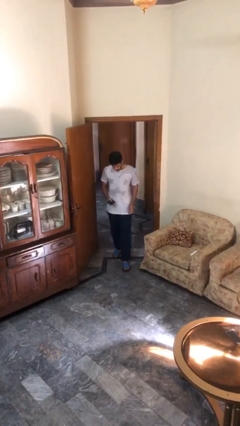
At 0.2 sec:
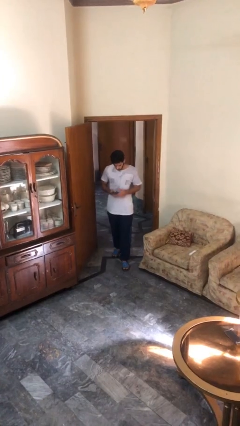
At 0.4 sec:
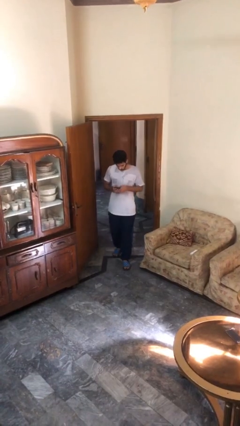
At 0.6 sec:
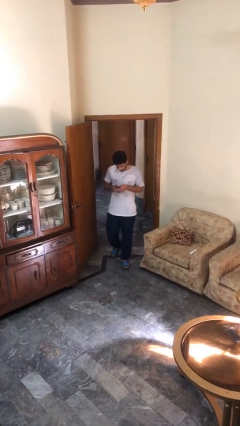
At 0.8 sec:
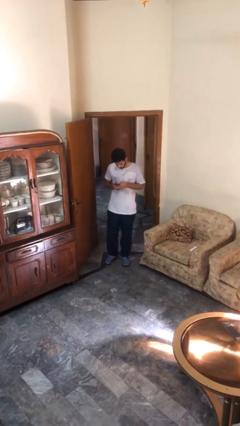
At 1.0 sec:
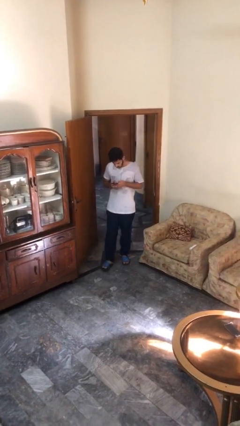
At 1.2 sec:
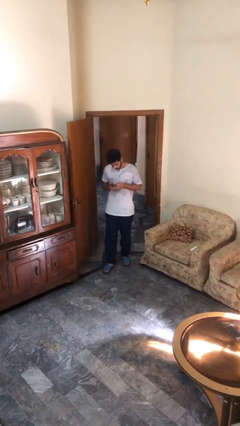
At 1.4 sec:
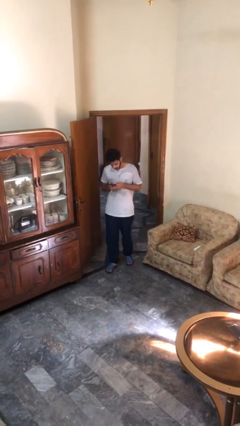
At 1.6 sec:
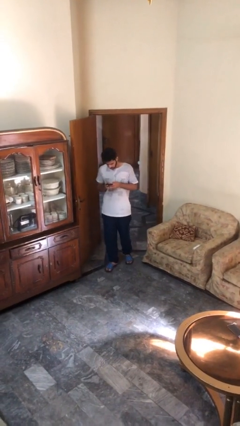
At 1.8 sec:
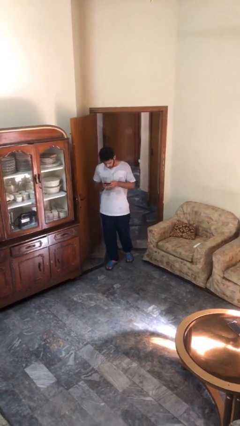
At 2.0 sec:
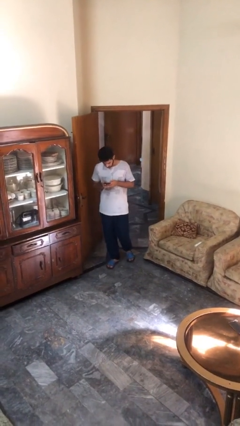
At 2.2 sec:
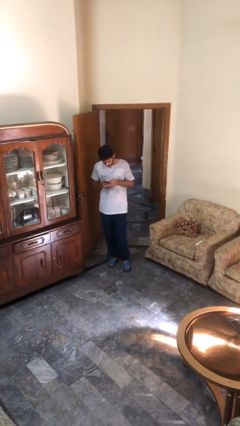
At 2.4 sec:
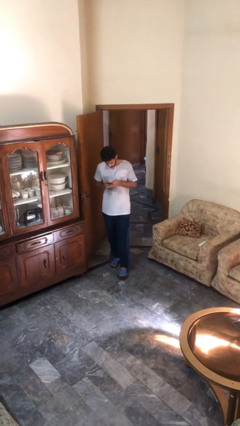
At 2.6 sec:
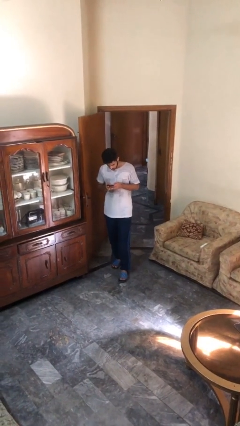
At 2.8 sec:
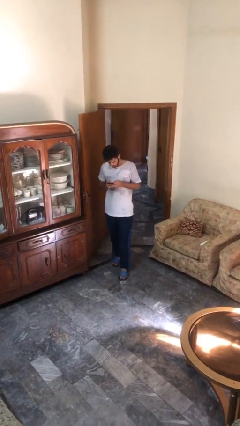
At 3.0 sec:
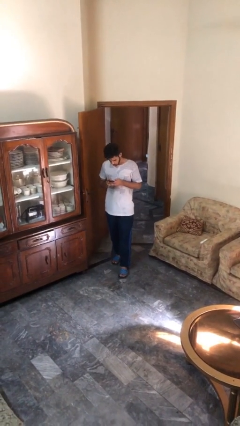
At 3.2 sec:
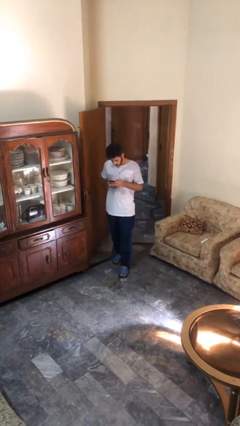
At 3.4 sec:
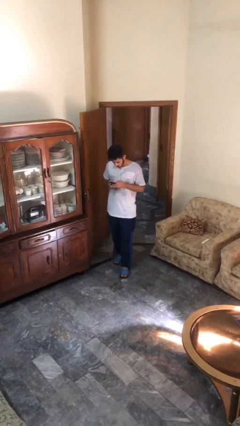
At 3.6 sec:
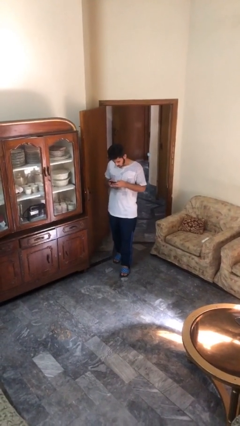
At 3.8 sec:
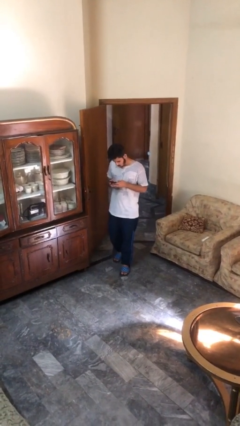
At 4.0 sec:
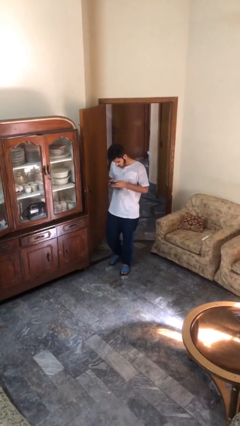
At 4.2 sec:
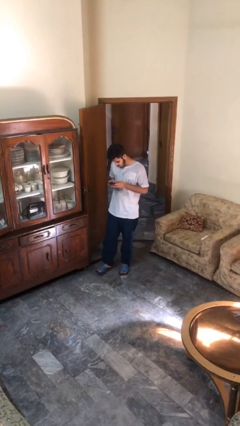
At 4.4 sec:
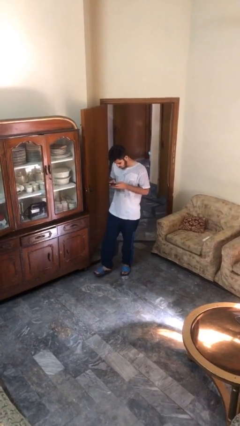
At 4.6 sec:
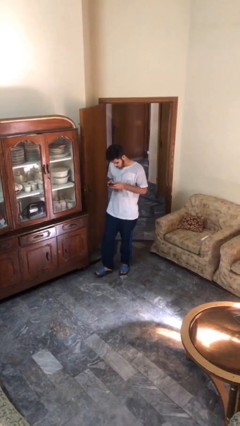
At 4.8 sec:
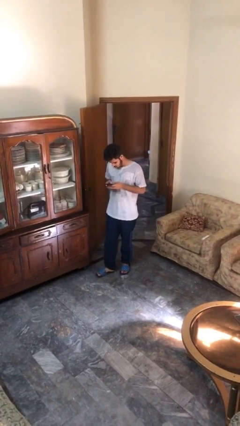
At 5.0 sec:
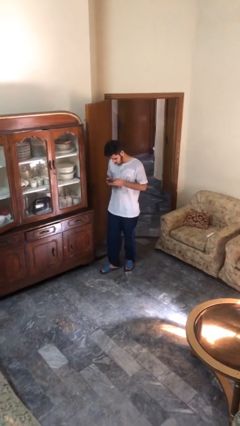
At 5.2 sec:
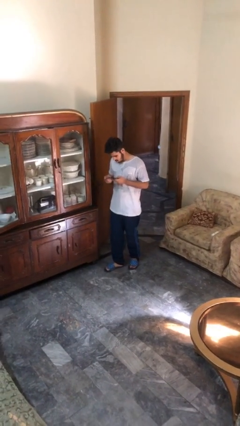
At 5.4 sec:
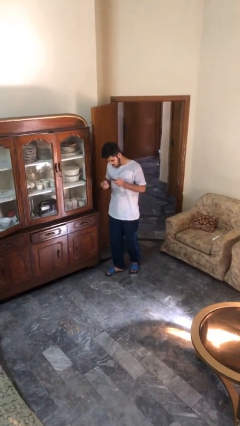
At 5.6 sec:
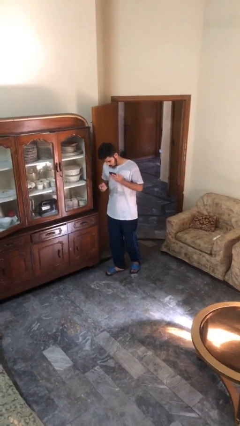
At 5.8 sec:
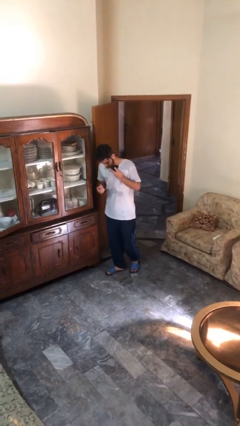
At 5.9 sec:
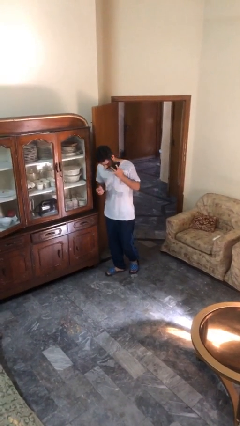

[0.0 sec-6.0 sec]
person texts on phone

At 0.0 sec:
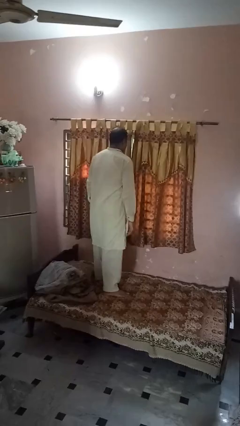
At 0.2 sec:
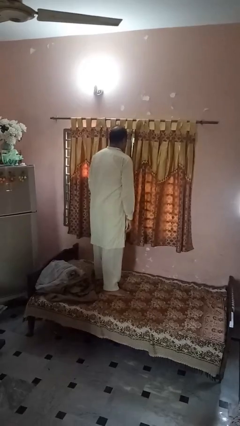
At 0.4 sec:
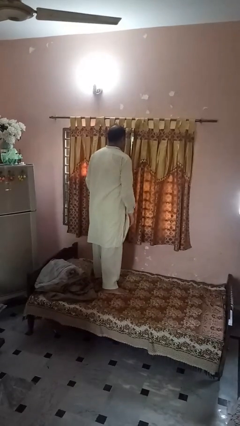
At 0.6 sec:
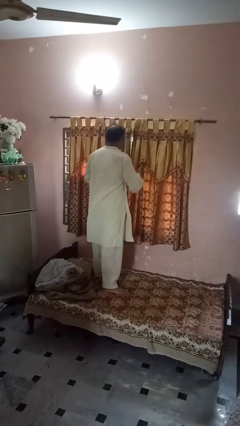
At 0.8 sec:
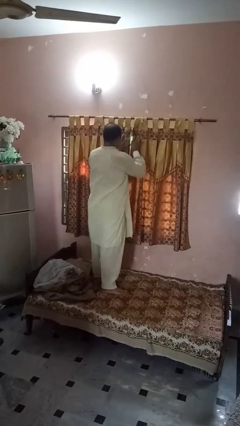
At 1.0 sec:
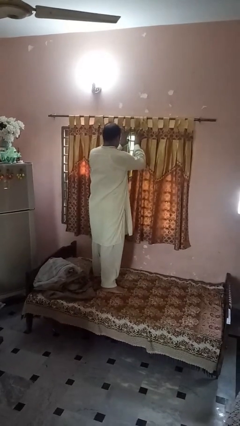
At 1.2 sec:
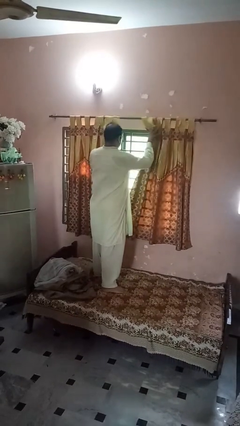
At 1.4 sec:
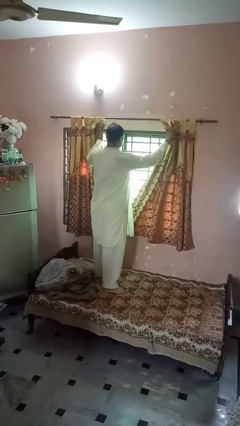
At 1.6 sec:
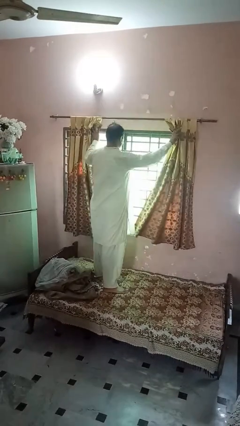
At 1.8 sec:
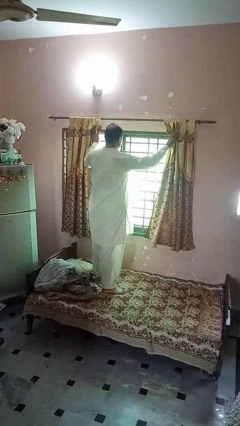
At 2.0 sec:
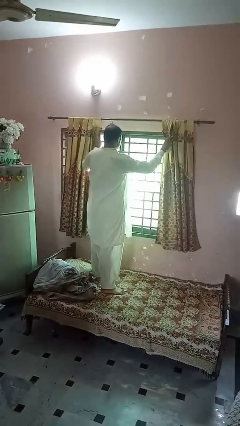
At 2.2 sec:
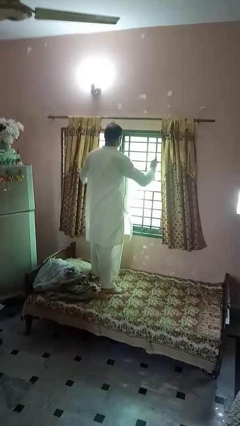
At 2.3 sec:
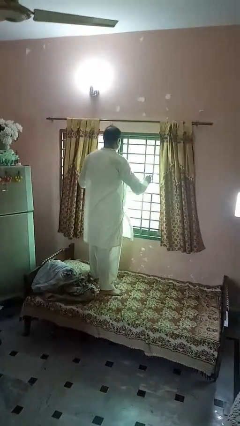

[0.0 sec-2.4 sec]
person opens curtains

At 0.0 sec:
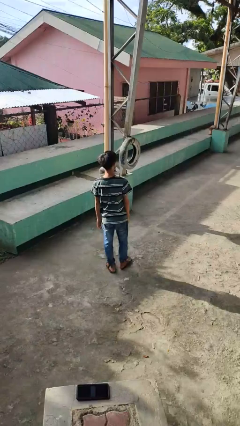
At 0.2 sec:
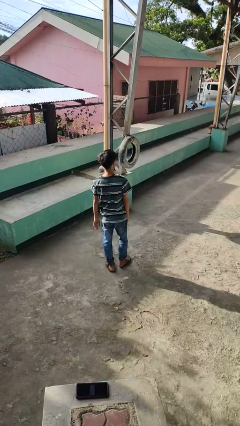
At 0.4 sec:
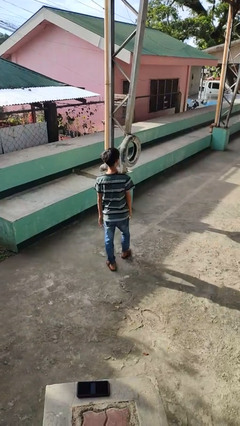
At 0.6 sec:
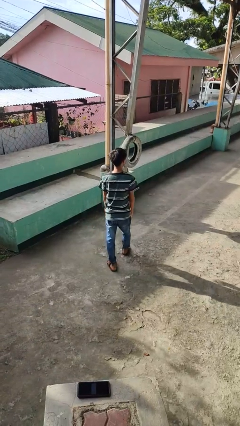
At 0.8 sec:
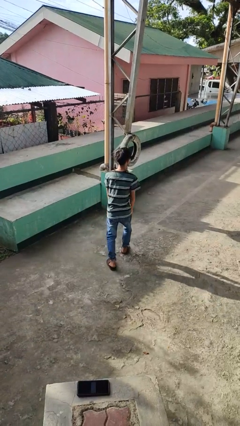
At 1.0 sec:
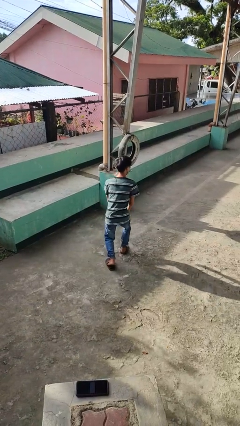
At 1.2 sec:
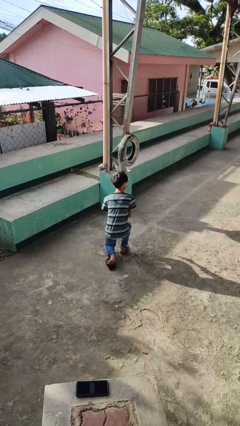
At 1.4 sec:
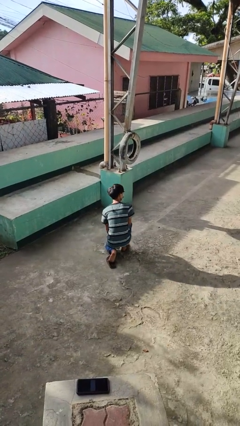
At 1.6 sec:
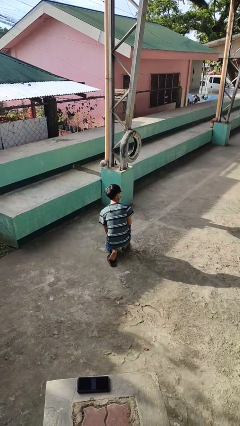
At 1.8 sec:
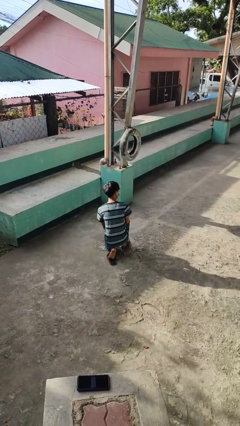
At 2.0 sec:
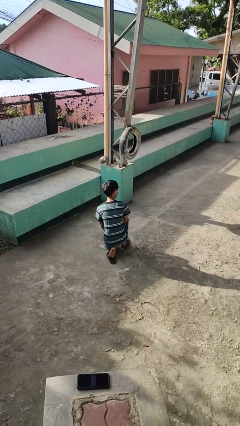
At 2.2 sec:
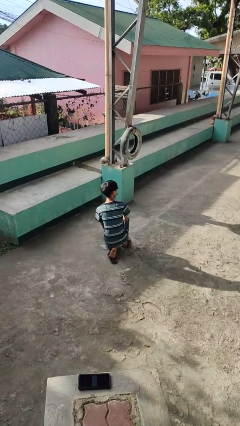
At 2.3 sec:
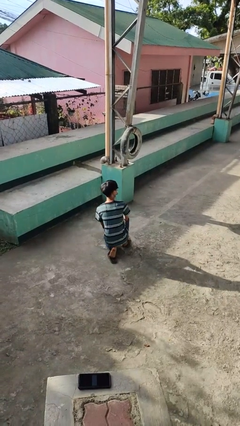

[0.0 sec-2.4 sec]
person kneels

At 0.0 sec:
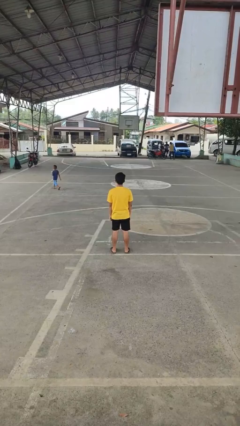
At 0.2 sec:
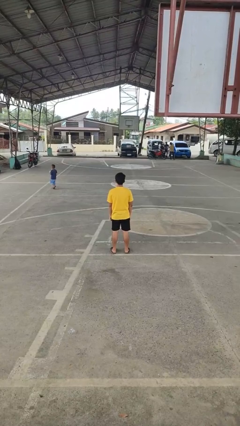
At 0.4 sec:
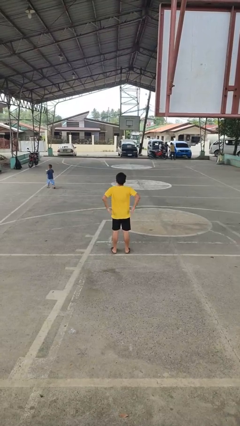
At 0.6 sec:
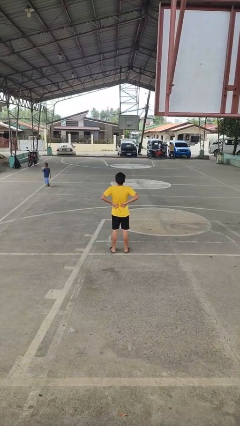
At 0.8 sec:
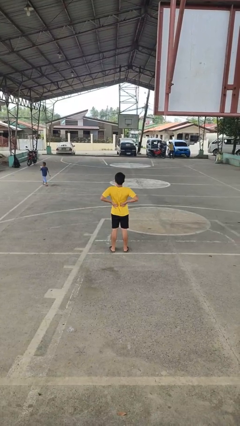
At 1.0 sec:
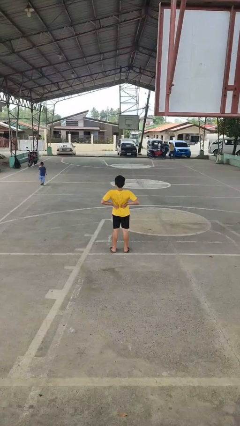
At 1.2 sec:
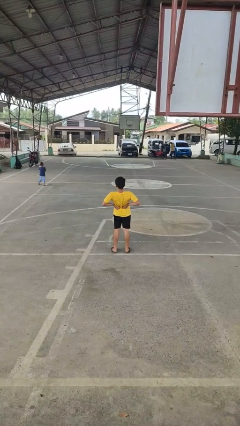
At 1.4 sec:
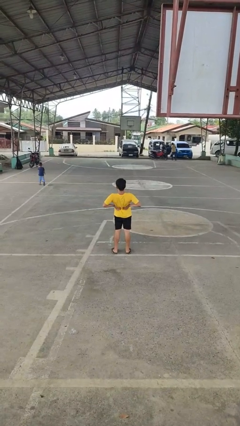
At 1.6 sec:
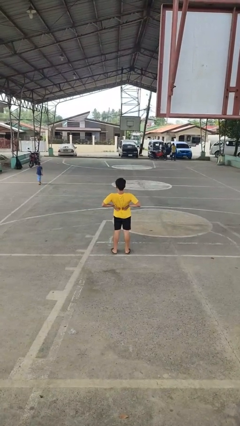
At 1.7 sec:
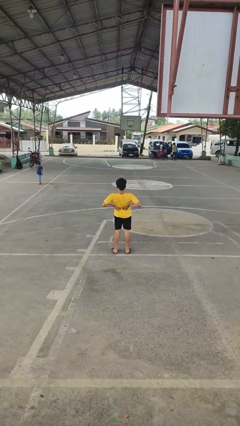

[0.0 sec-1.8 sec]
person stretches back

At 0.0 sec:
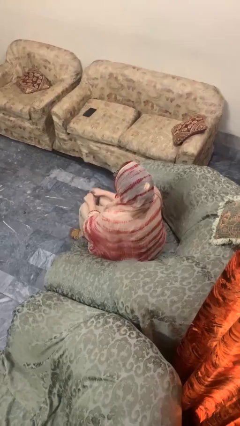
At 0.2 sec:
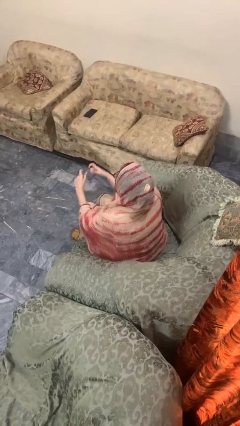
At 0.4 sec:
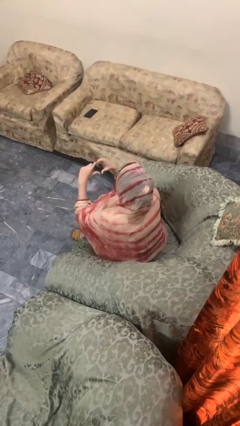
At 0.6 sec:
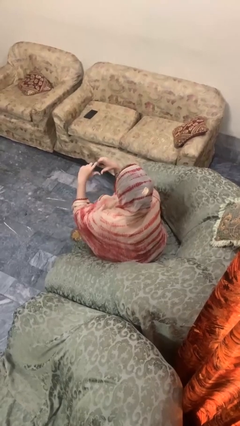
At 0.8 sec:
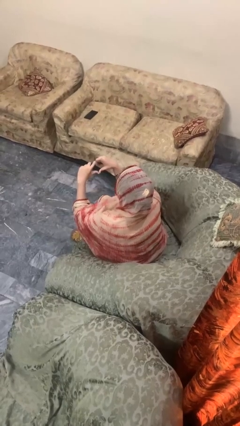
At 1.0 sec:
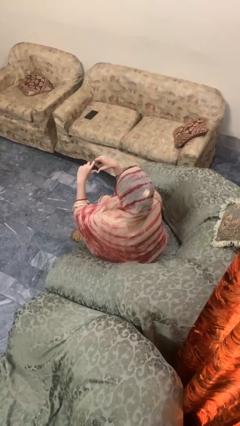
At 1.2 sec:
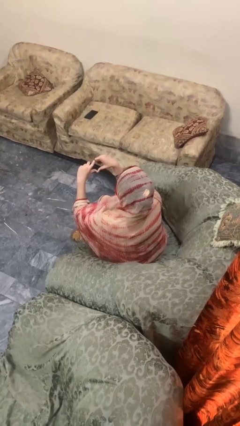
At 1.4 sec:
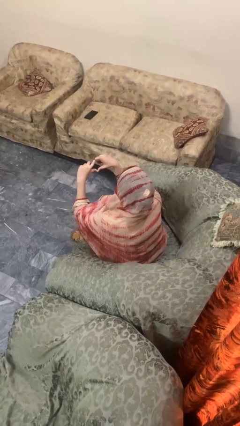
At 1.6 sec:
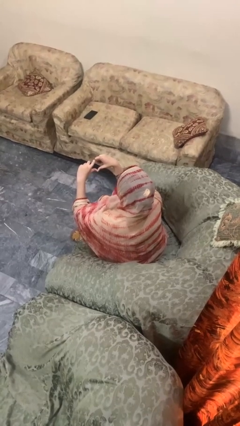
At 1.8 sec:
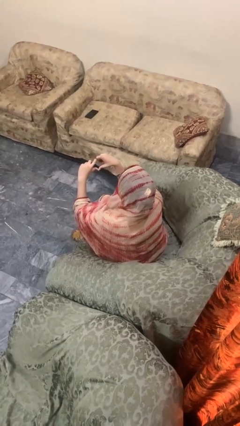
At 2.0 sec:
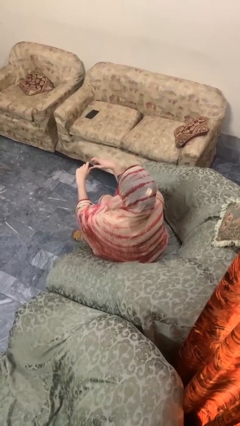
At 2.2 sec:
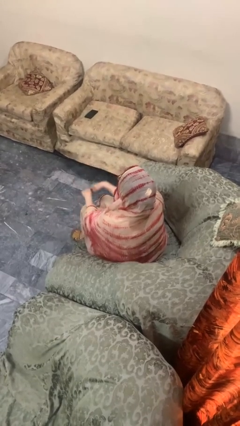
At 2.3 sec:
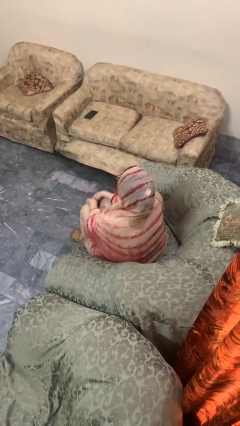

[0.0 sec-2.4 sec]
person gestures heart

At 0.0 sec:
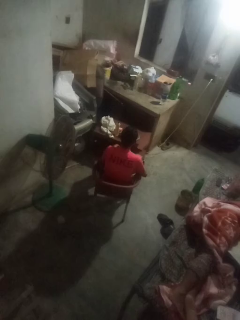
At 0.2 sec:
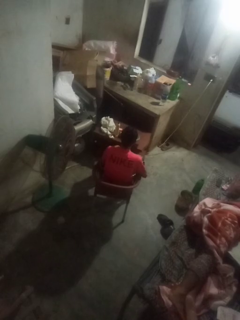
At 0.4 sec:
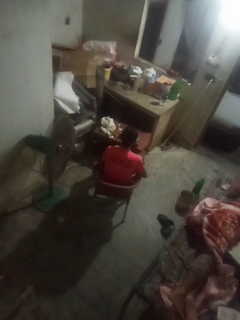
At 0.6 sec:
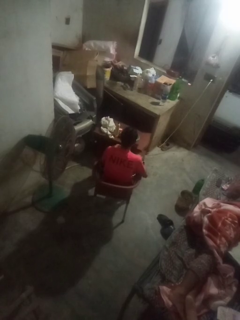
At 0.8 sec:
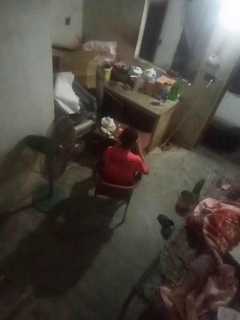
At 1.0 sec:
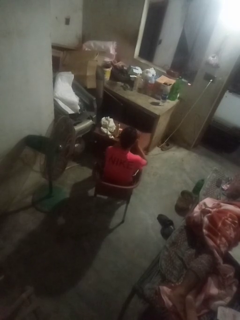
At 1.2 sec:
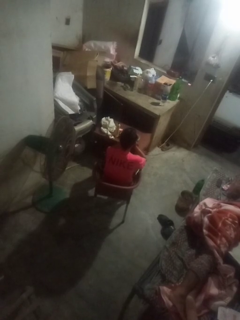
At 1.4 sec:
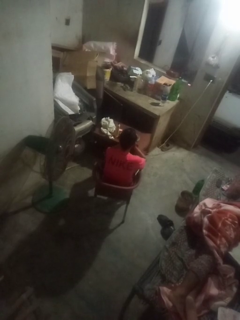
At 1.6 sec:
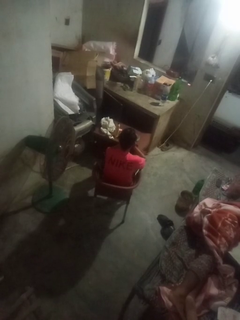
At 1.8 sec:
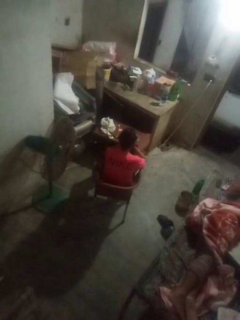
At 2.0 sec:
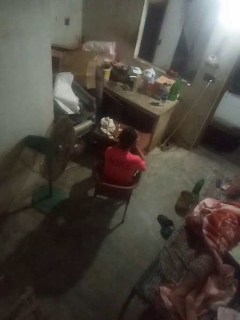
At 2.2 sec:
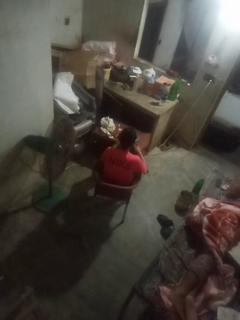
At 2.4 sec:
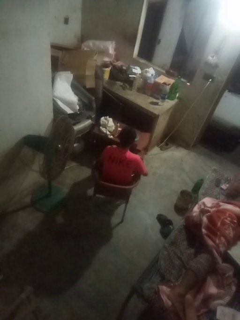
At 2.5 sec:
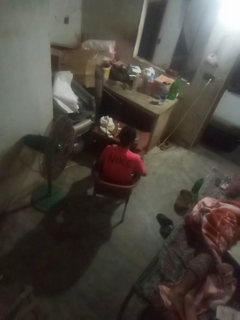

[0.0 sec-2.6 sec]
person yawns

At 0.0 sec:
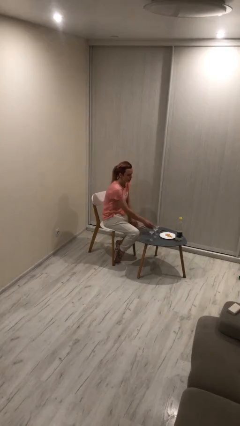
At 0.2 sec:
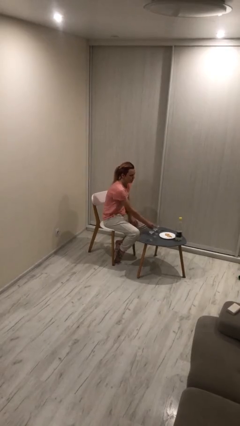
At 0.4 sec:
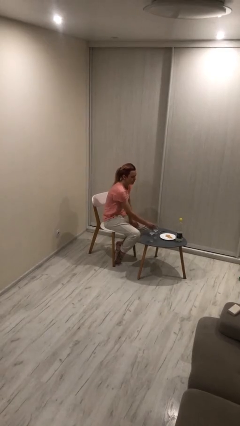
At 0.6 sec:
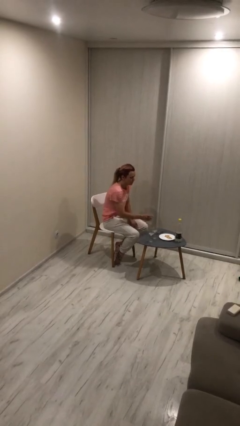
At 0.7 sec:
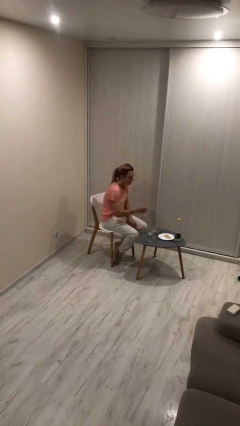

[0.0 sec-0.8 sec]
person picks up object from table
